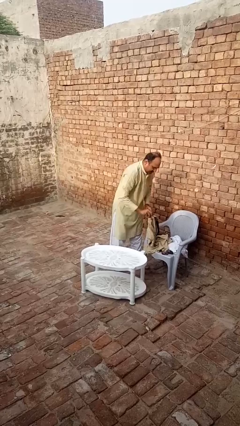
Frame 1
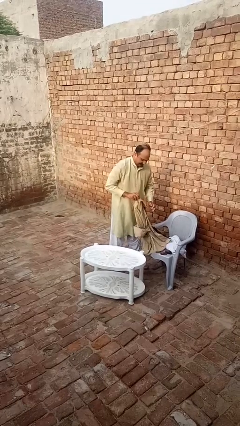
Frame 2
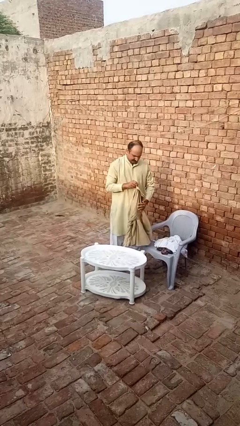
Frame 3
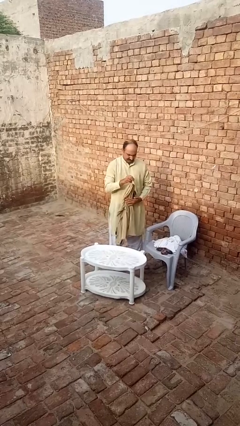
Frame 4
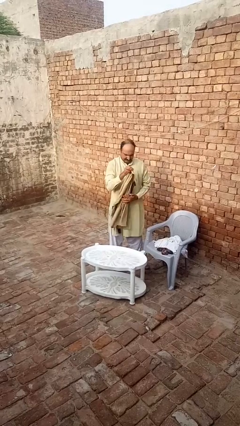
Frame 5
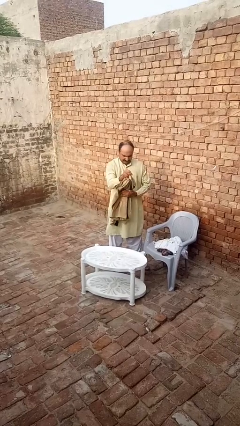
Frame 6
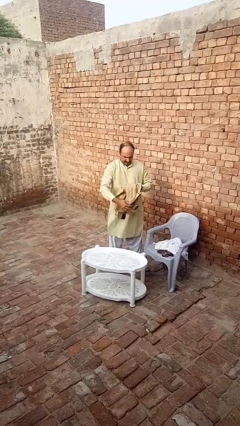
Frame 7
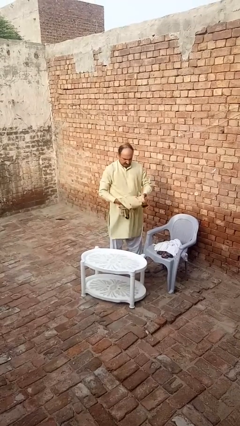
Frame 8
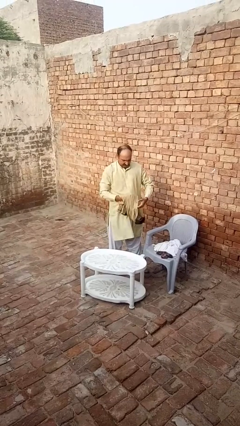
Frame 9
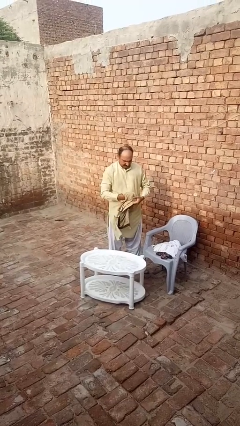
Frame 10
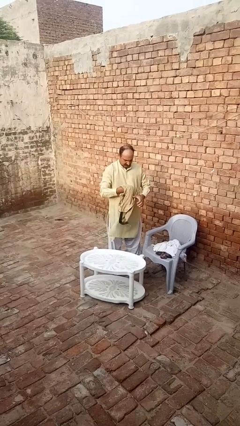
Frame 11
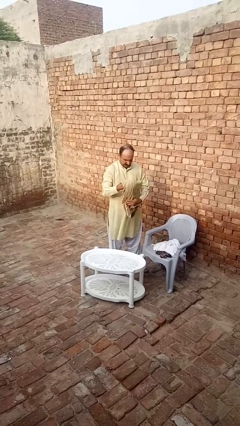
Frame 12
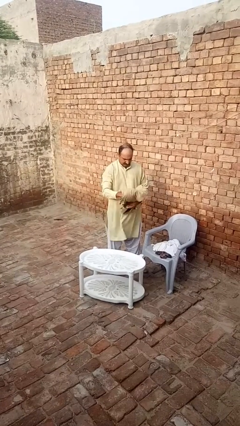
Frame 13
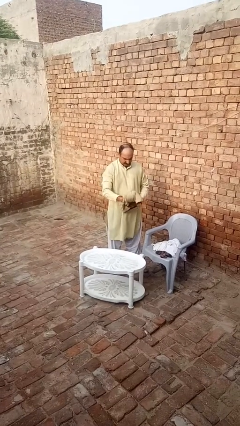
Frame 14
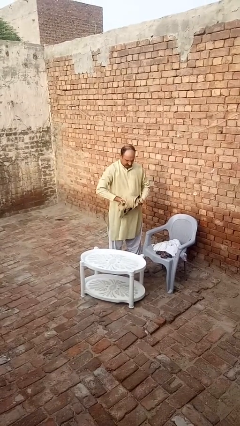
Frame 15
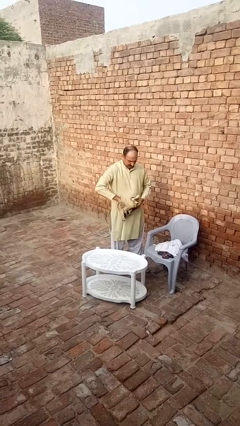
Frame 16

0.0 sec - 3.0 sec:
person folds shirt

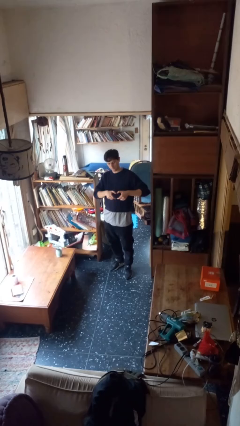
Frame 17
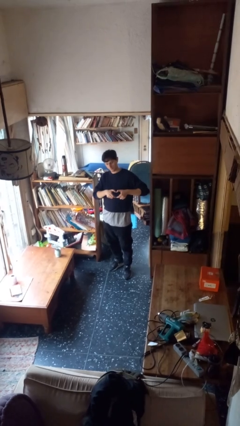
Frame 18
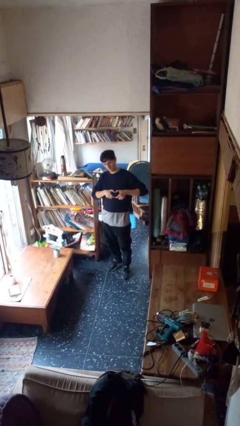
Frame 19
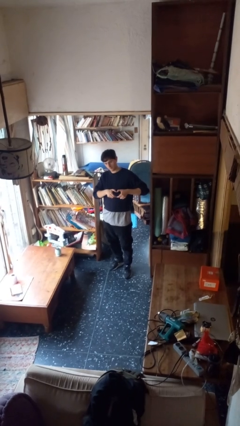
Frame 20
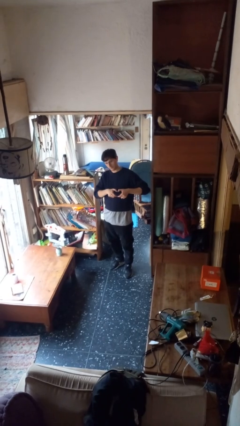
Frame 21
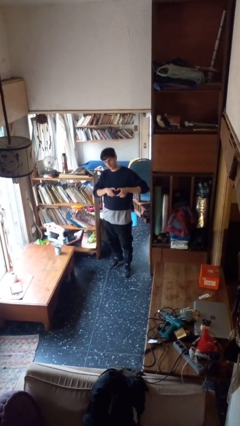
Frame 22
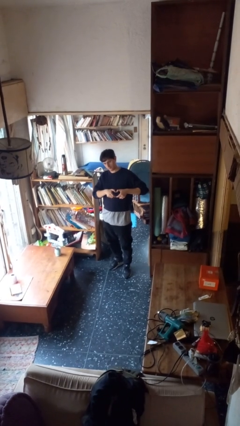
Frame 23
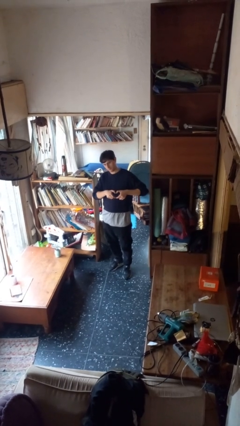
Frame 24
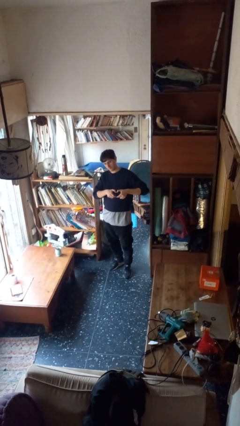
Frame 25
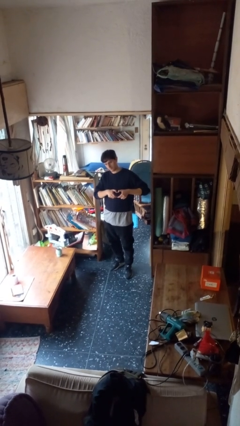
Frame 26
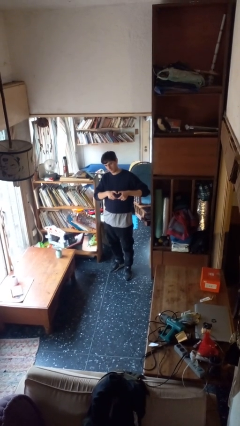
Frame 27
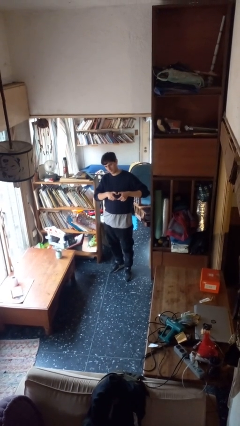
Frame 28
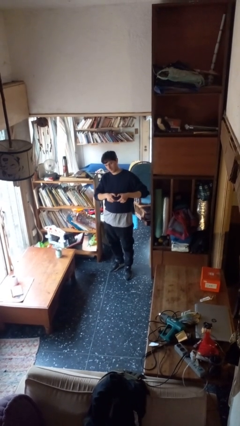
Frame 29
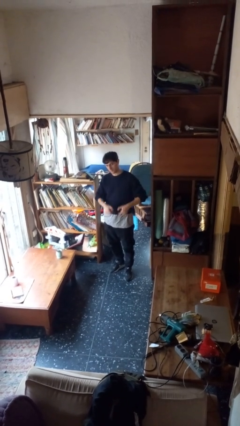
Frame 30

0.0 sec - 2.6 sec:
person gestures heart

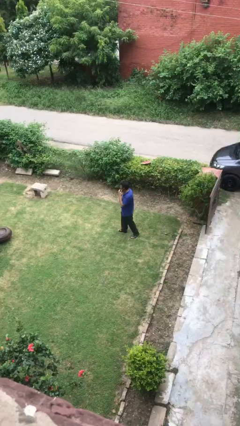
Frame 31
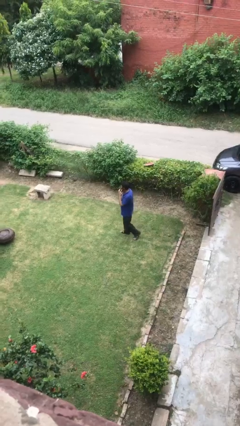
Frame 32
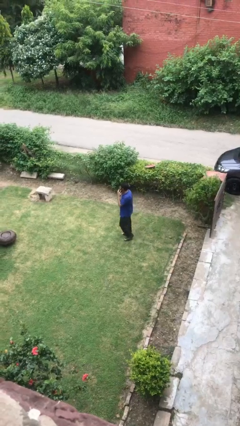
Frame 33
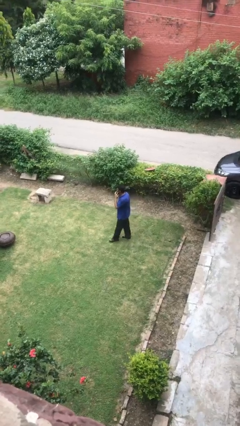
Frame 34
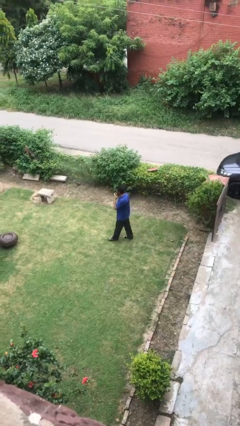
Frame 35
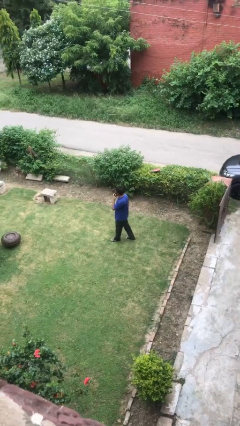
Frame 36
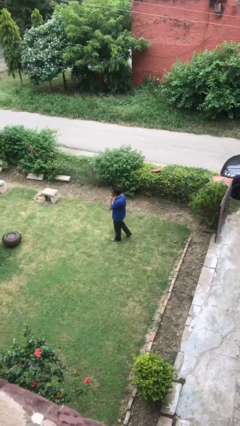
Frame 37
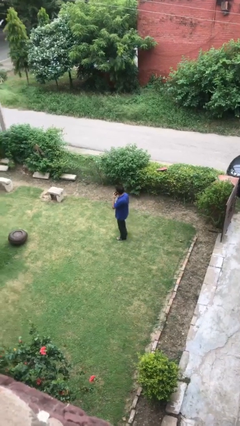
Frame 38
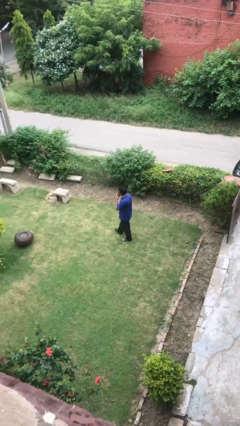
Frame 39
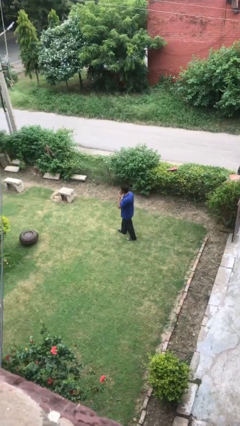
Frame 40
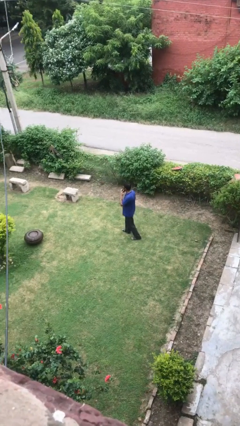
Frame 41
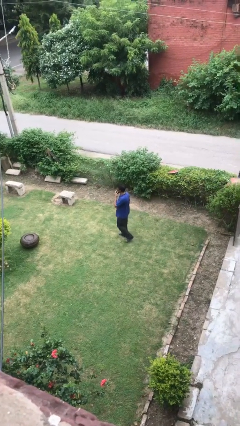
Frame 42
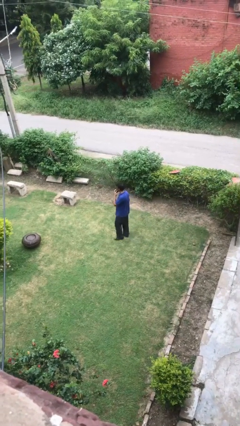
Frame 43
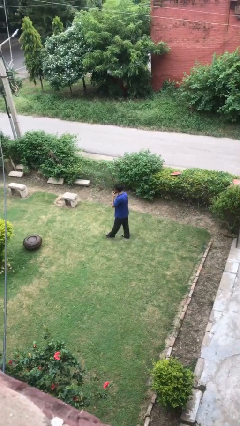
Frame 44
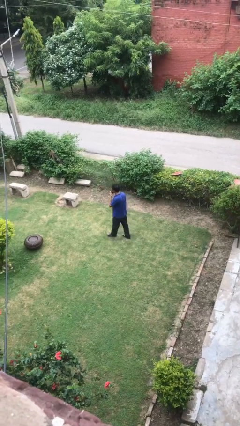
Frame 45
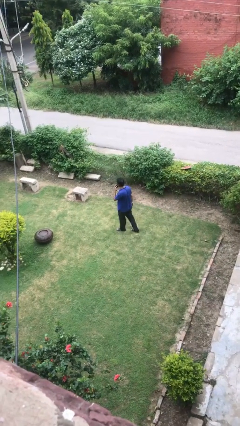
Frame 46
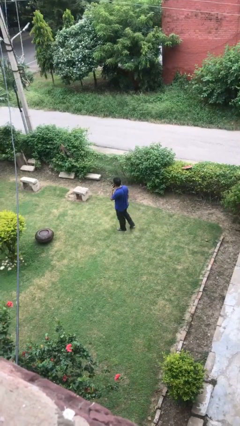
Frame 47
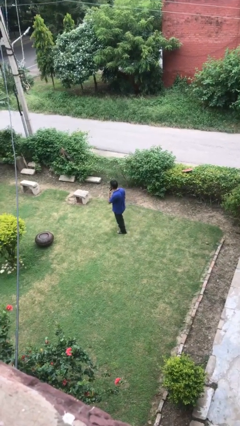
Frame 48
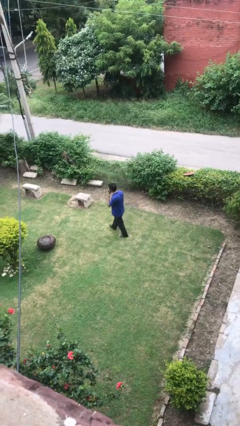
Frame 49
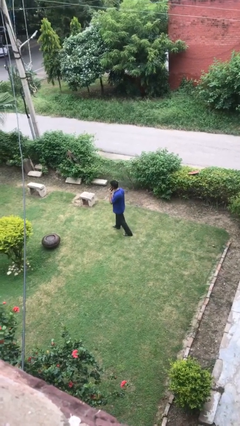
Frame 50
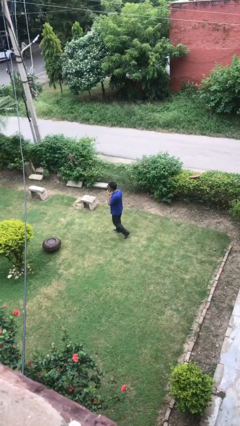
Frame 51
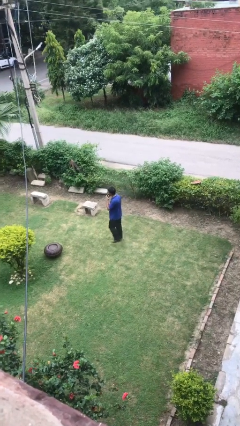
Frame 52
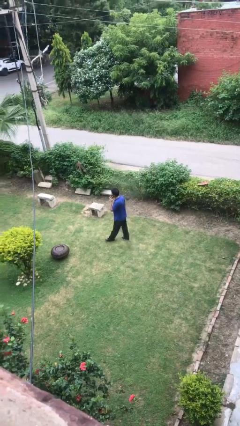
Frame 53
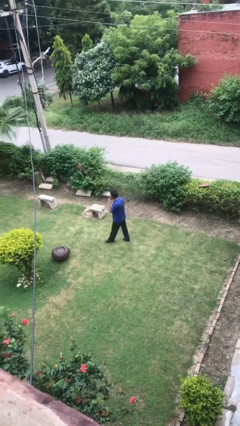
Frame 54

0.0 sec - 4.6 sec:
person talks on phone

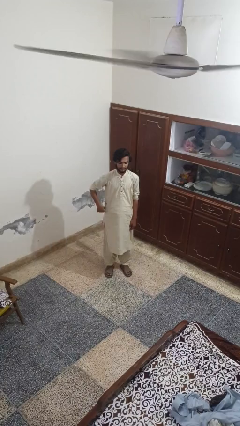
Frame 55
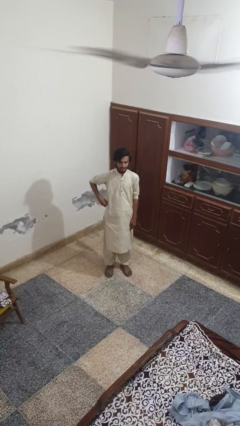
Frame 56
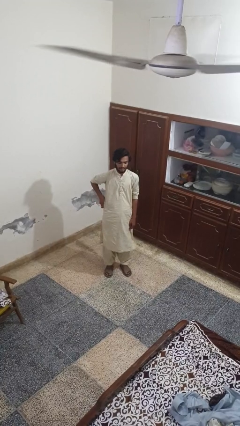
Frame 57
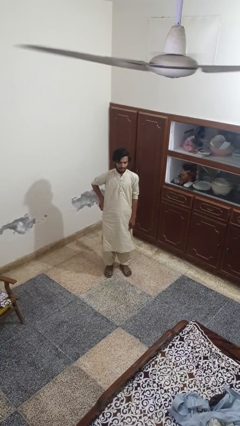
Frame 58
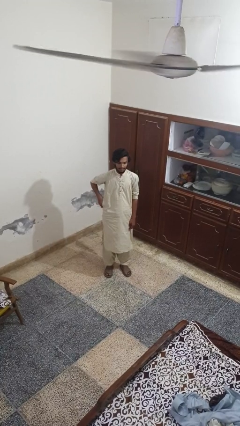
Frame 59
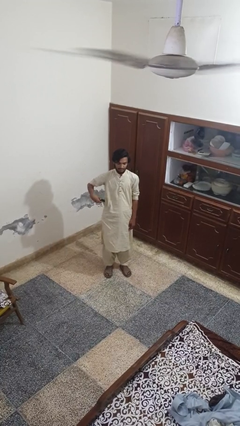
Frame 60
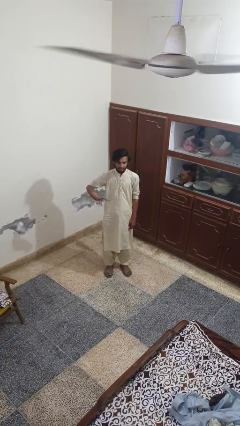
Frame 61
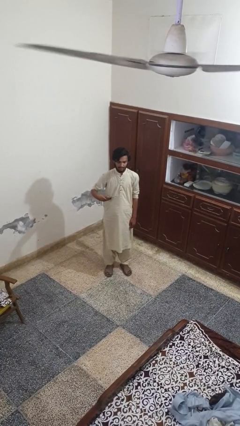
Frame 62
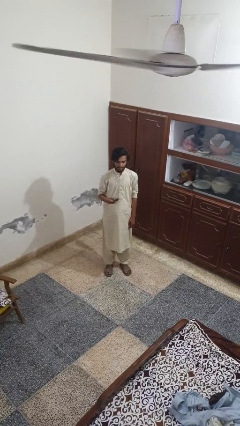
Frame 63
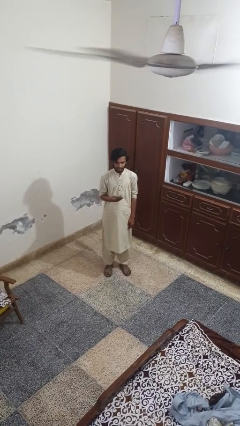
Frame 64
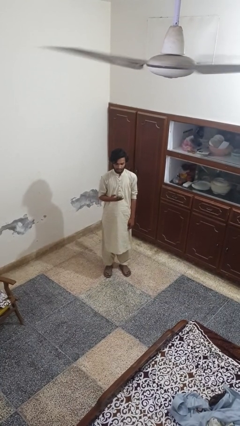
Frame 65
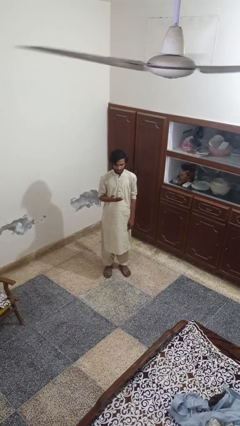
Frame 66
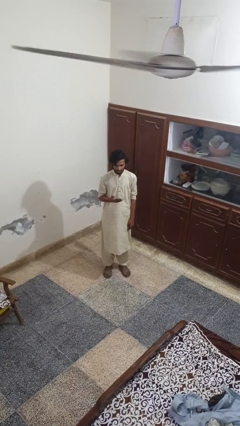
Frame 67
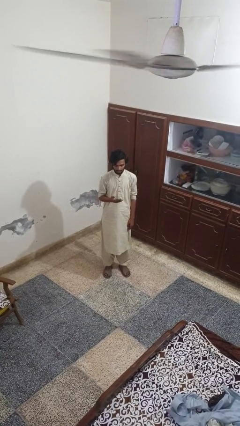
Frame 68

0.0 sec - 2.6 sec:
person takes phone from pocket

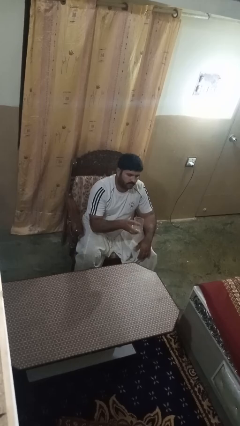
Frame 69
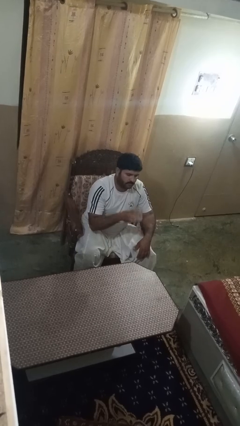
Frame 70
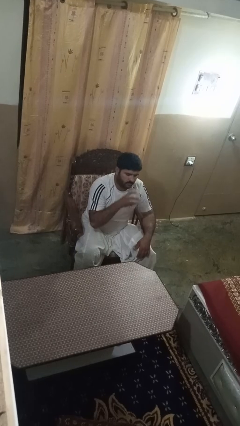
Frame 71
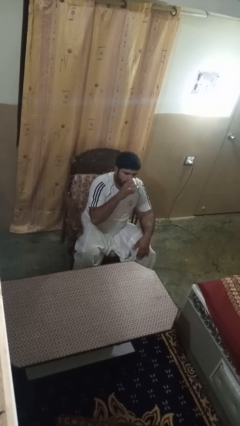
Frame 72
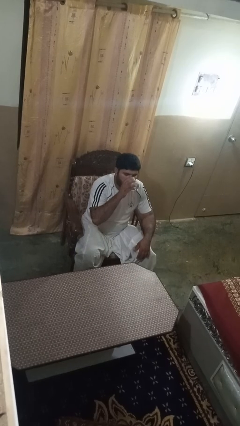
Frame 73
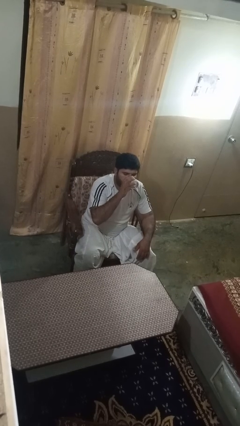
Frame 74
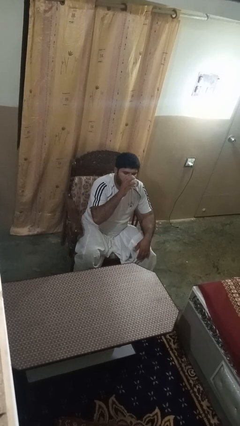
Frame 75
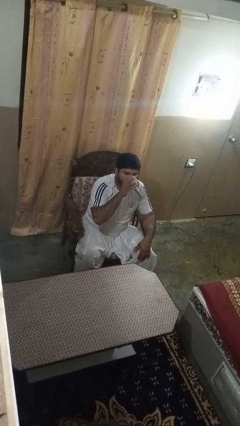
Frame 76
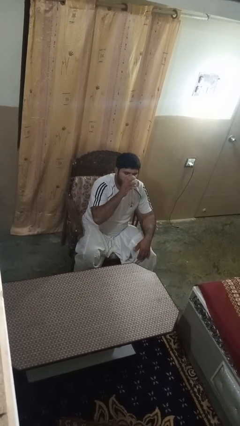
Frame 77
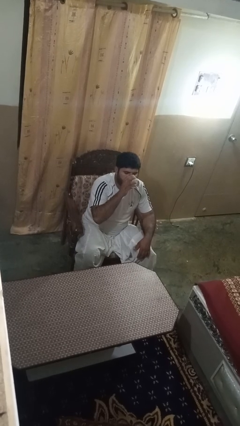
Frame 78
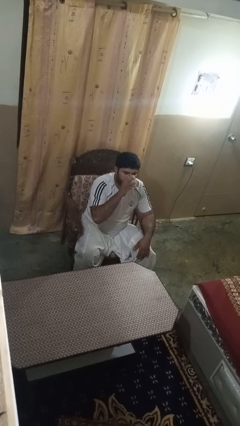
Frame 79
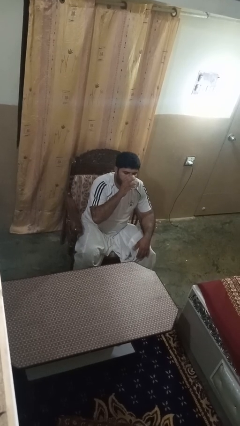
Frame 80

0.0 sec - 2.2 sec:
person drinks from shotglass

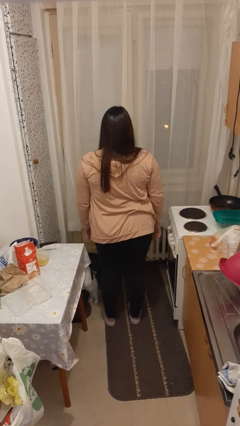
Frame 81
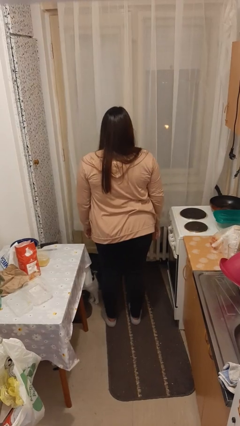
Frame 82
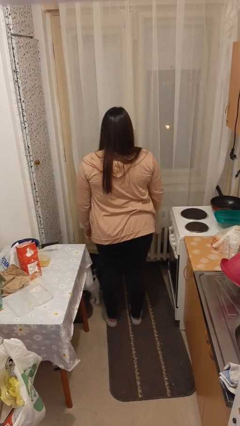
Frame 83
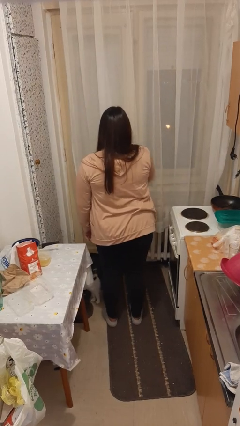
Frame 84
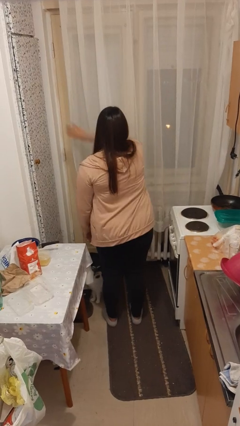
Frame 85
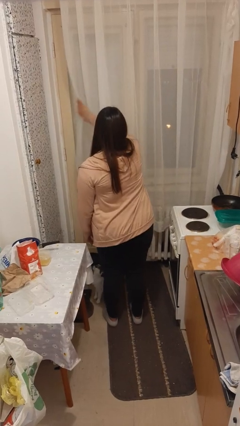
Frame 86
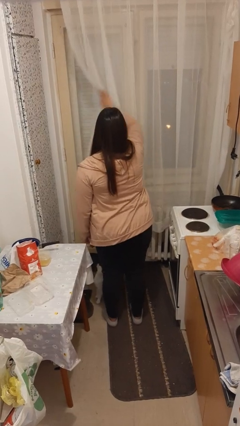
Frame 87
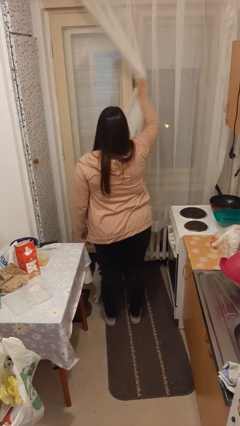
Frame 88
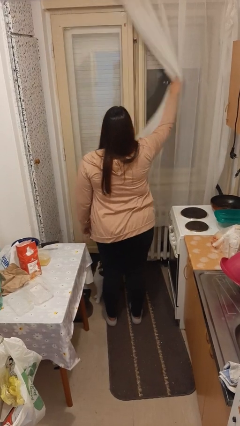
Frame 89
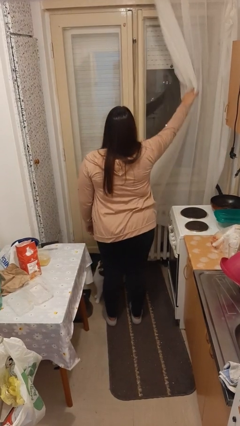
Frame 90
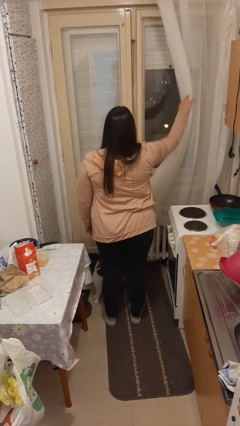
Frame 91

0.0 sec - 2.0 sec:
person opens curtains

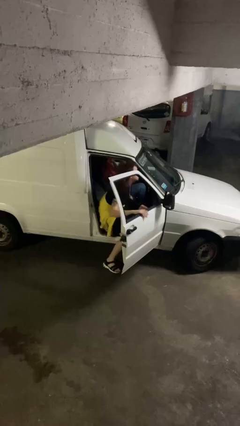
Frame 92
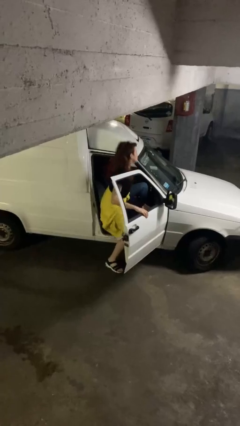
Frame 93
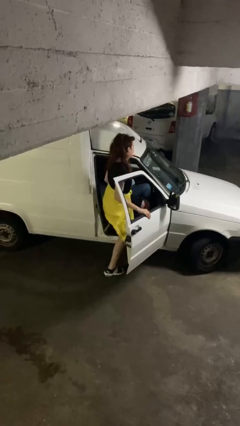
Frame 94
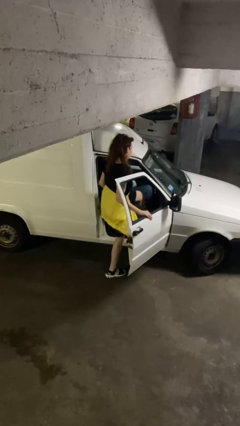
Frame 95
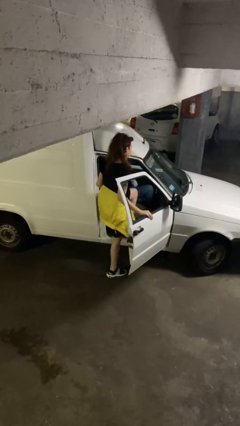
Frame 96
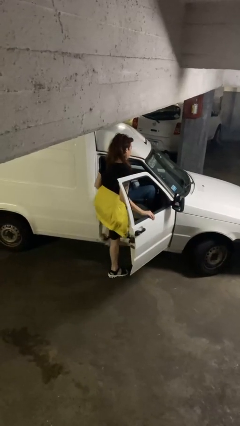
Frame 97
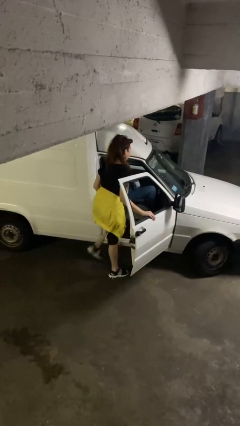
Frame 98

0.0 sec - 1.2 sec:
person exits car
